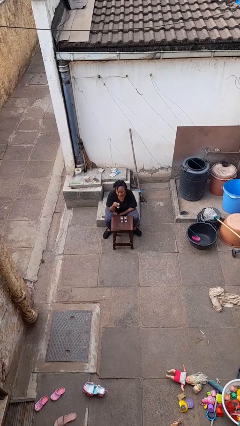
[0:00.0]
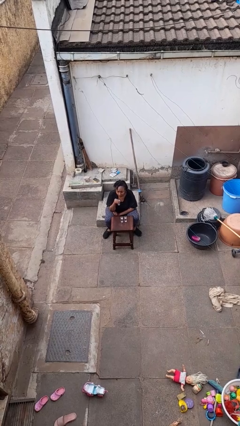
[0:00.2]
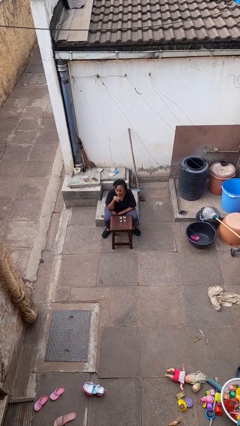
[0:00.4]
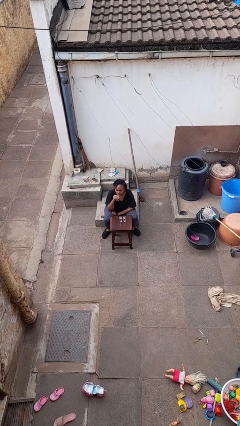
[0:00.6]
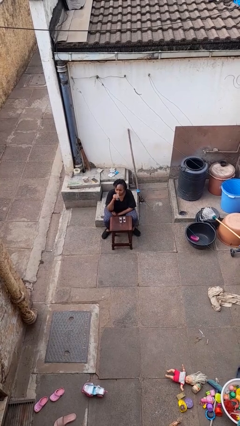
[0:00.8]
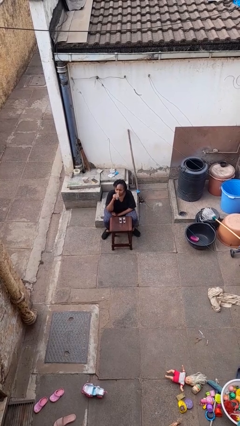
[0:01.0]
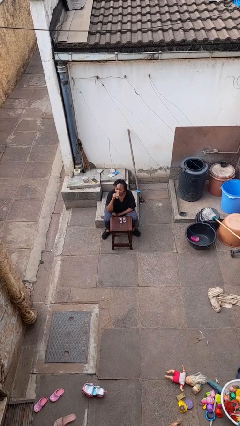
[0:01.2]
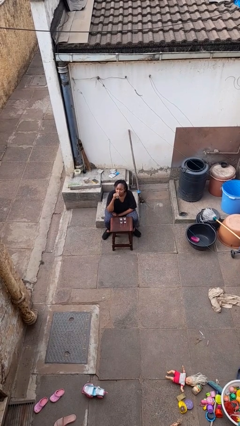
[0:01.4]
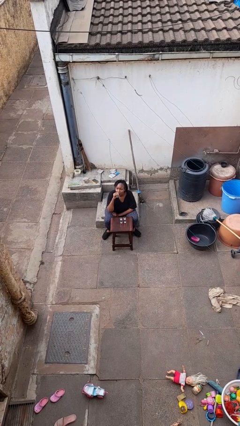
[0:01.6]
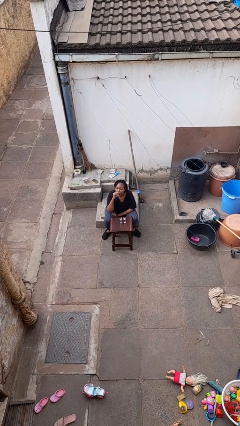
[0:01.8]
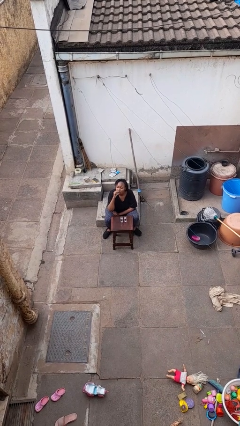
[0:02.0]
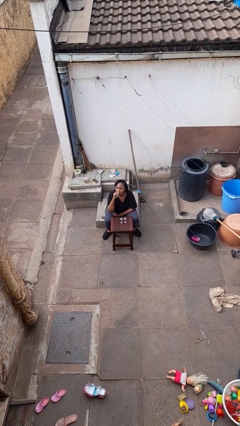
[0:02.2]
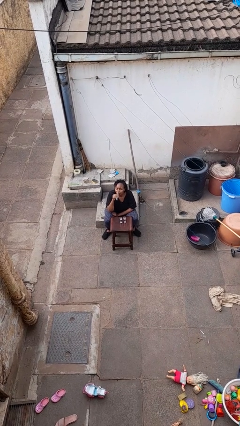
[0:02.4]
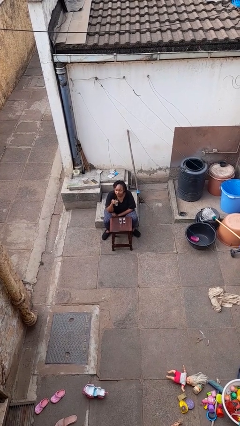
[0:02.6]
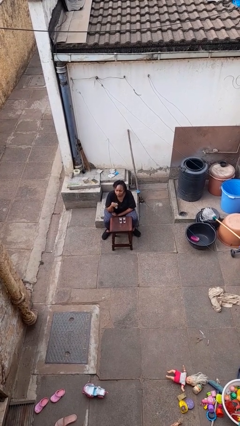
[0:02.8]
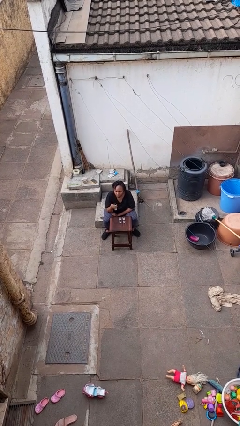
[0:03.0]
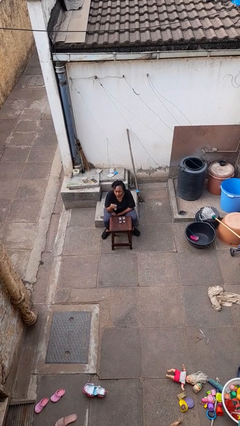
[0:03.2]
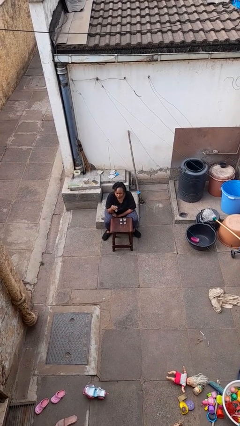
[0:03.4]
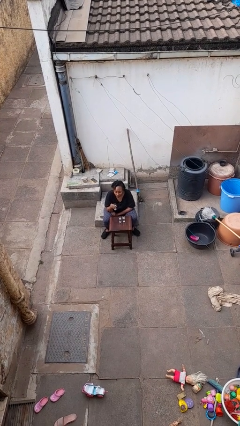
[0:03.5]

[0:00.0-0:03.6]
person drinks from shotglass

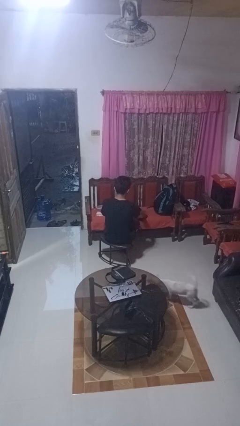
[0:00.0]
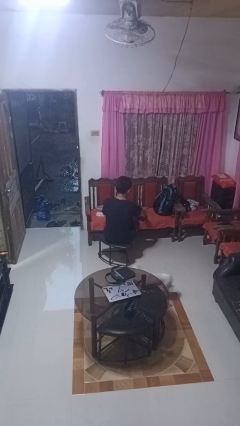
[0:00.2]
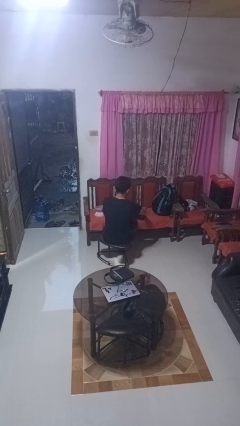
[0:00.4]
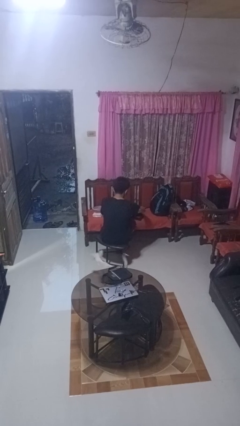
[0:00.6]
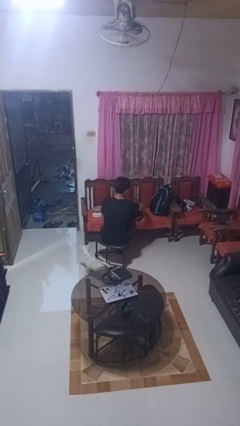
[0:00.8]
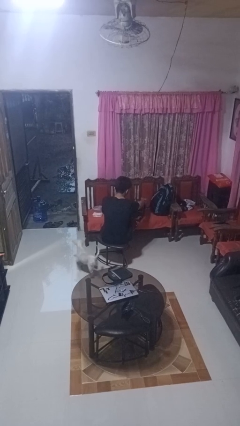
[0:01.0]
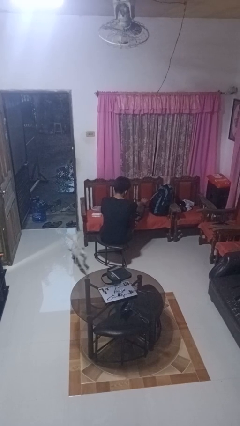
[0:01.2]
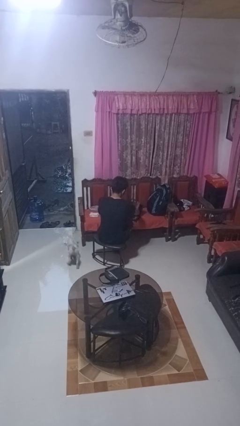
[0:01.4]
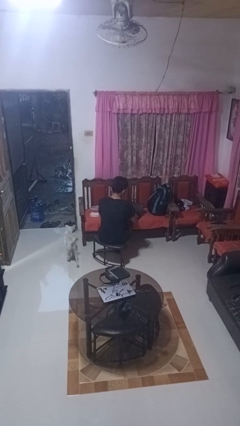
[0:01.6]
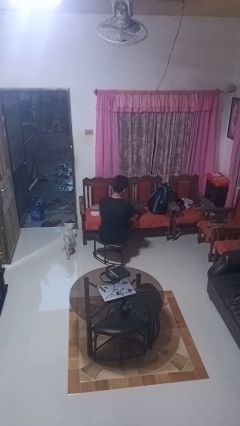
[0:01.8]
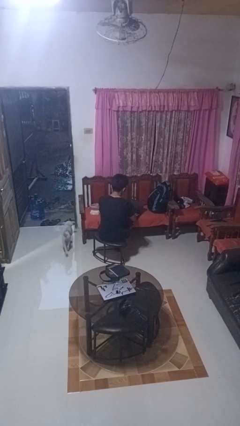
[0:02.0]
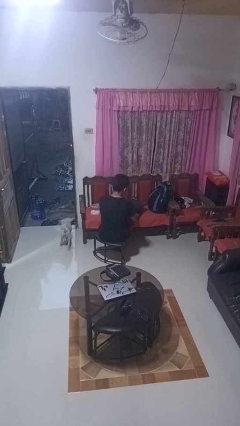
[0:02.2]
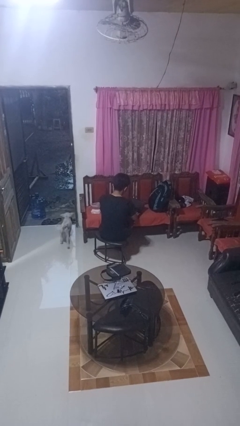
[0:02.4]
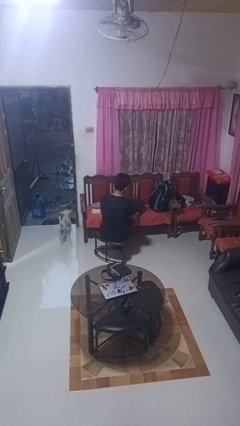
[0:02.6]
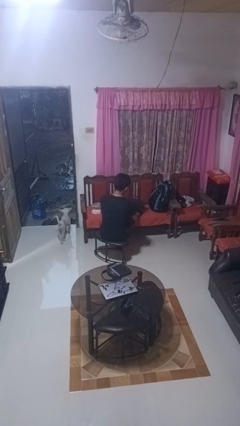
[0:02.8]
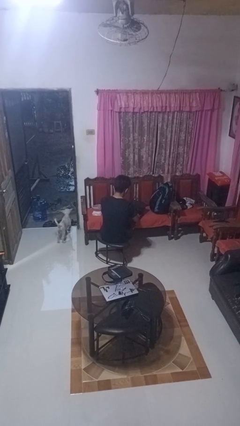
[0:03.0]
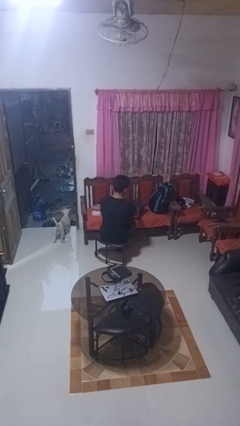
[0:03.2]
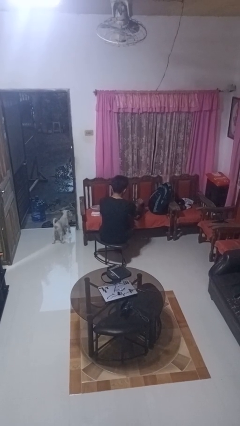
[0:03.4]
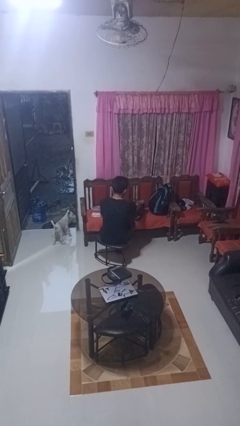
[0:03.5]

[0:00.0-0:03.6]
person opens laptop

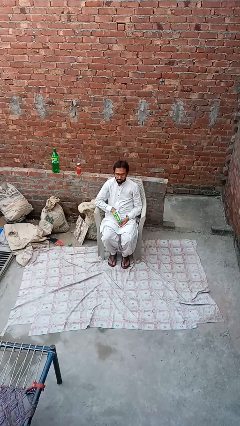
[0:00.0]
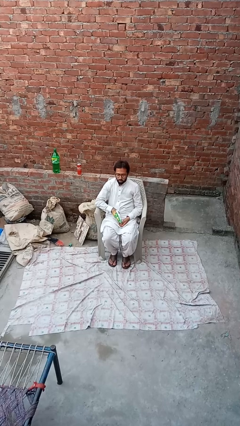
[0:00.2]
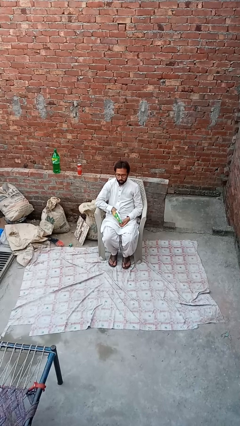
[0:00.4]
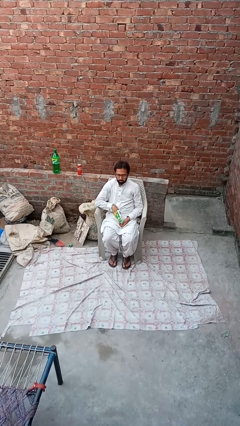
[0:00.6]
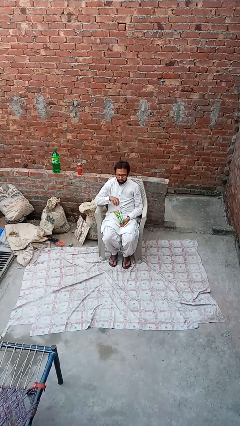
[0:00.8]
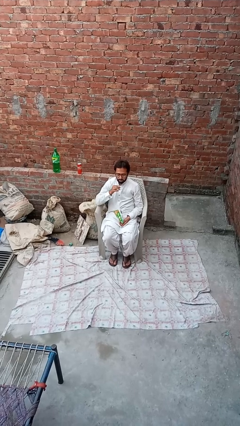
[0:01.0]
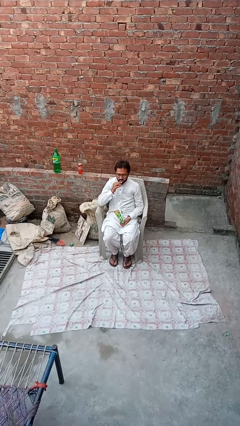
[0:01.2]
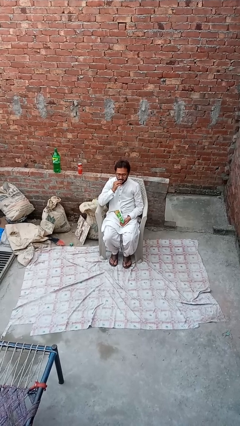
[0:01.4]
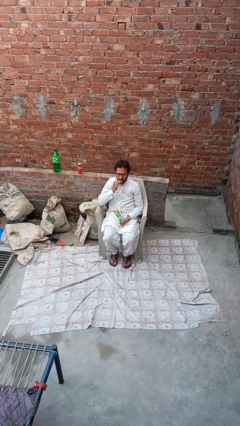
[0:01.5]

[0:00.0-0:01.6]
person eats snack from bag

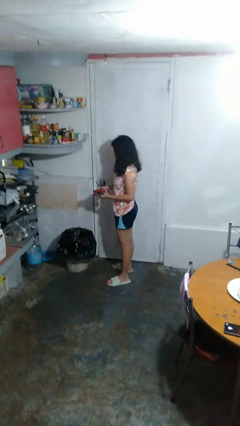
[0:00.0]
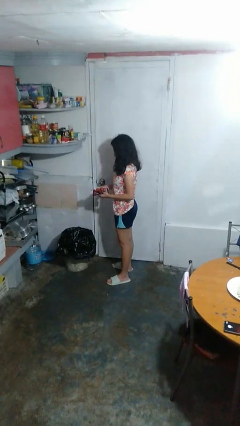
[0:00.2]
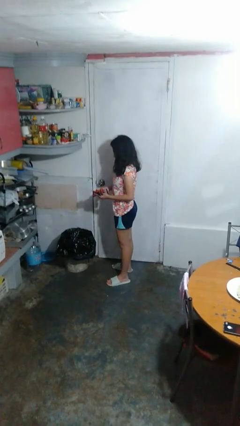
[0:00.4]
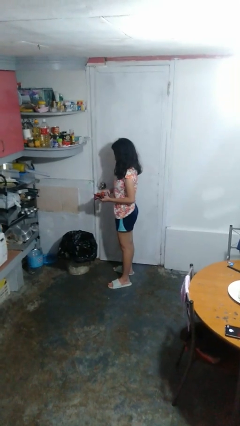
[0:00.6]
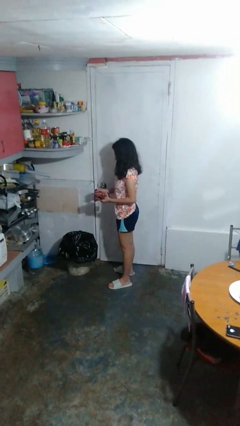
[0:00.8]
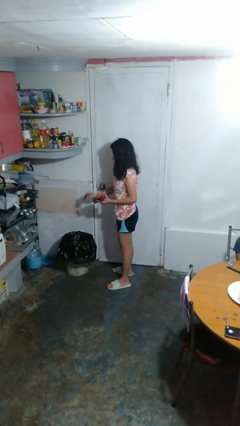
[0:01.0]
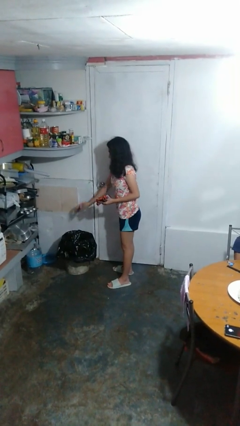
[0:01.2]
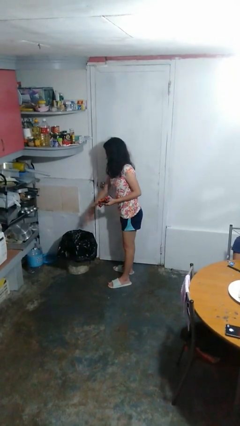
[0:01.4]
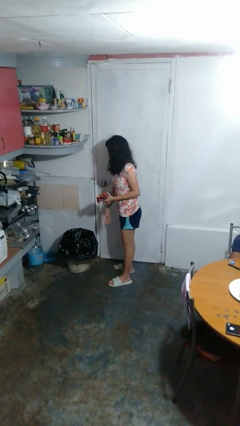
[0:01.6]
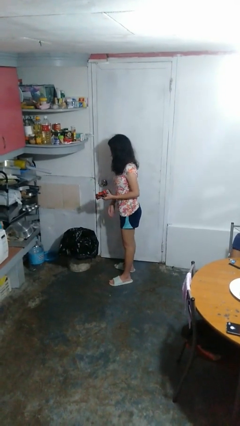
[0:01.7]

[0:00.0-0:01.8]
person discards trash

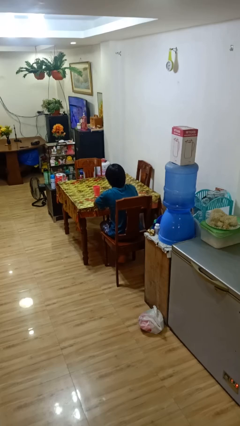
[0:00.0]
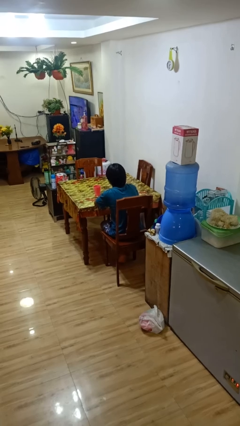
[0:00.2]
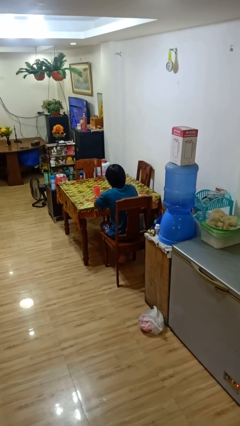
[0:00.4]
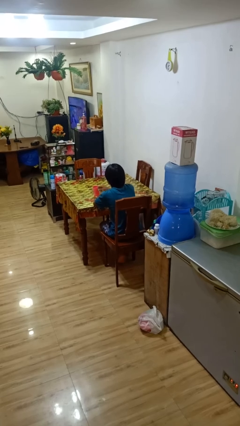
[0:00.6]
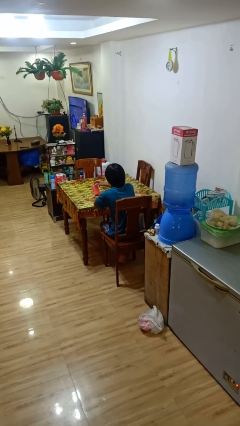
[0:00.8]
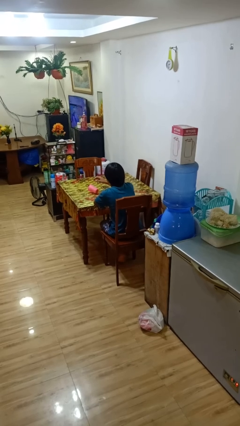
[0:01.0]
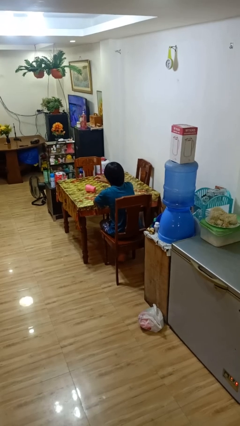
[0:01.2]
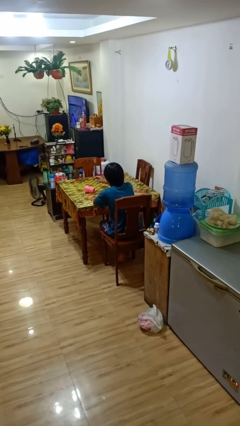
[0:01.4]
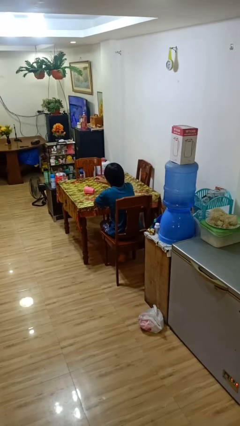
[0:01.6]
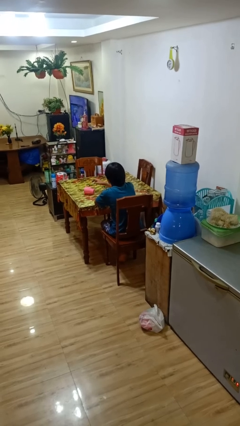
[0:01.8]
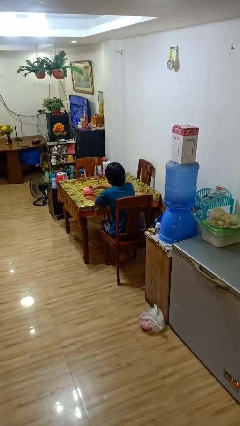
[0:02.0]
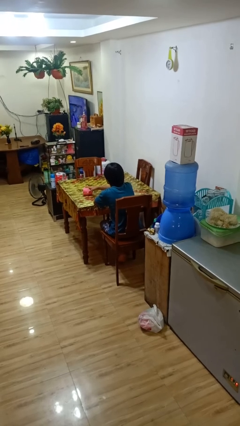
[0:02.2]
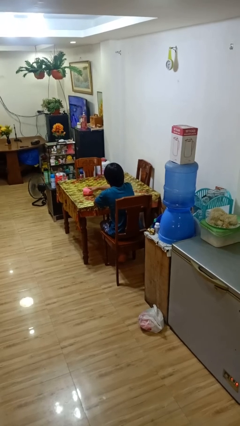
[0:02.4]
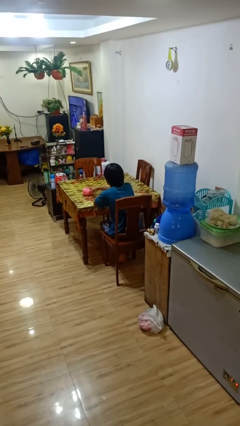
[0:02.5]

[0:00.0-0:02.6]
person knocks over glass

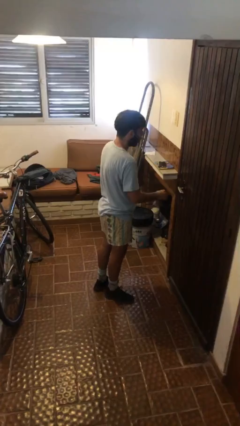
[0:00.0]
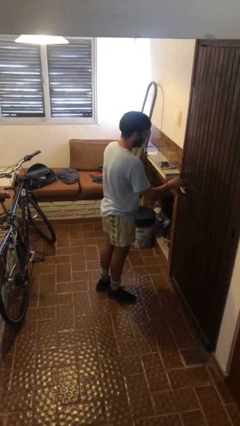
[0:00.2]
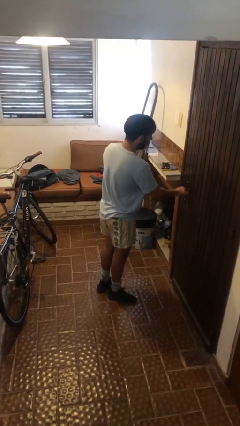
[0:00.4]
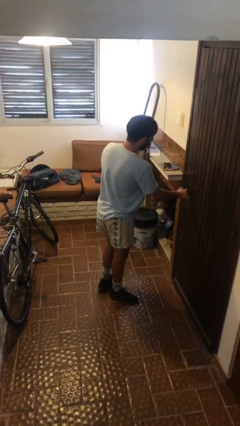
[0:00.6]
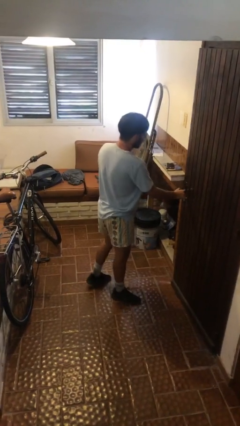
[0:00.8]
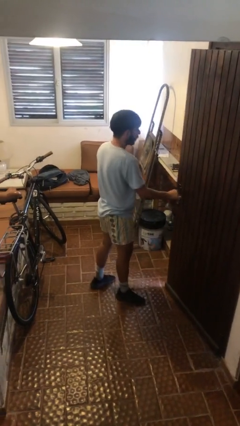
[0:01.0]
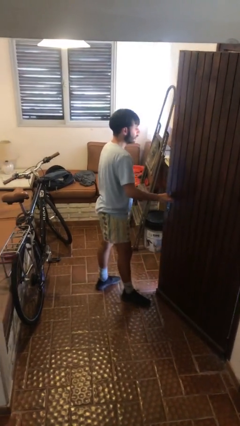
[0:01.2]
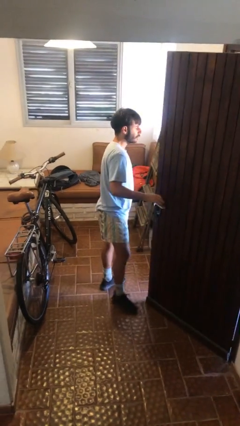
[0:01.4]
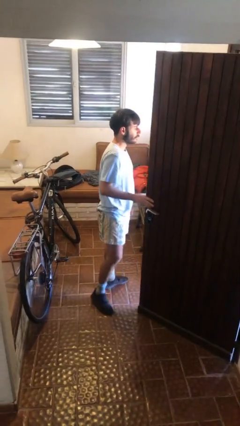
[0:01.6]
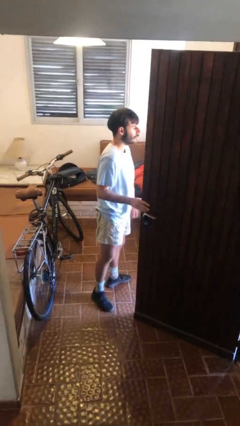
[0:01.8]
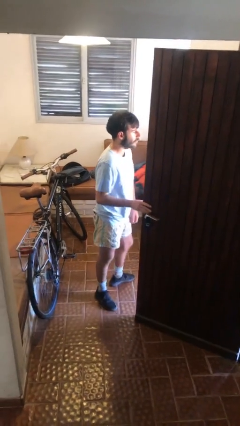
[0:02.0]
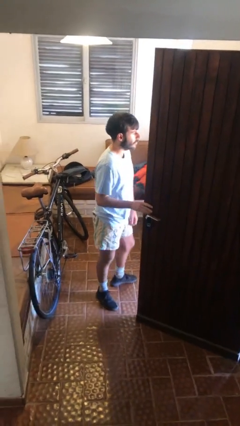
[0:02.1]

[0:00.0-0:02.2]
person opens facility door

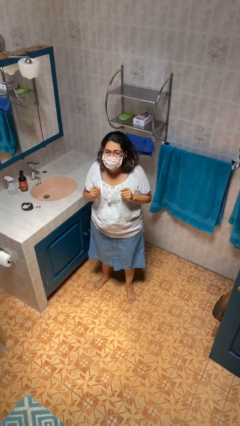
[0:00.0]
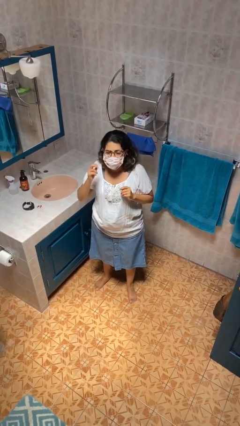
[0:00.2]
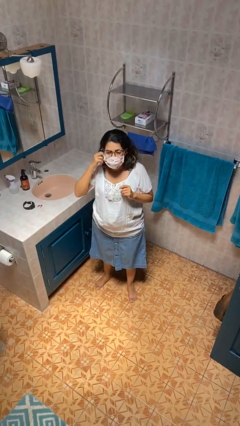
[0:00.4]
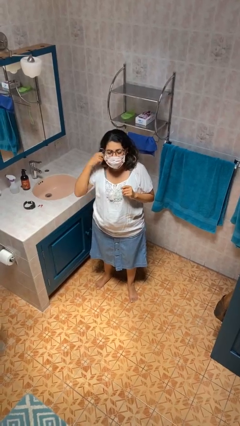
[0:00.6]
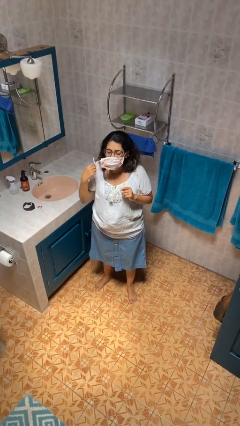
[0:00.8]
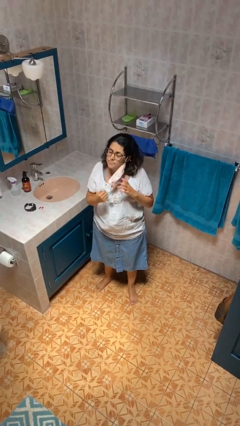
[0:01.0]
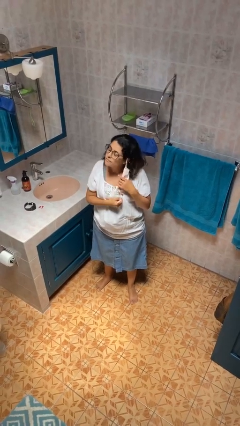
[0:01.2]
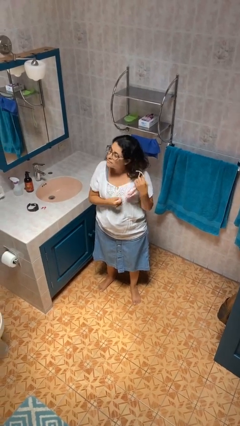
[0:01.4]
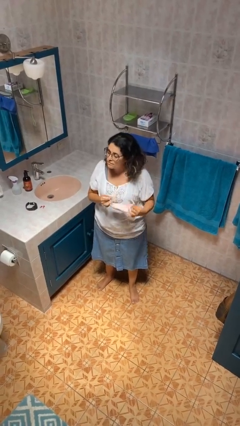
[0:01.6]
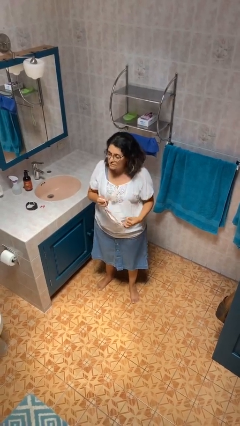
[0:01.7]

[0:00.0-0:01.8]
person takes off facemask
